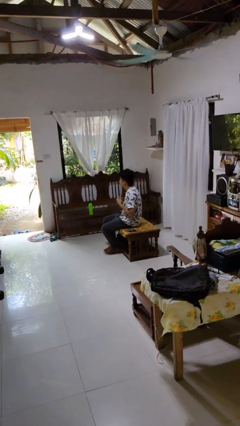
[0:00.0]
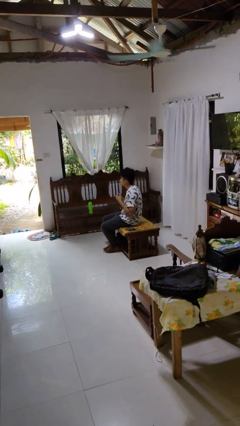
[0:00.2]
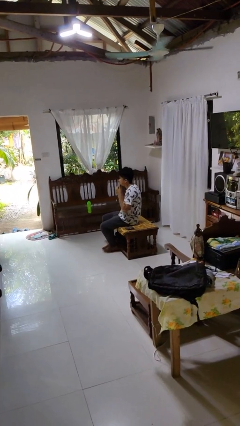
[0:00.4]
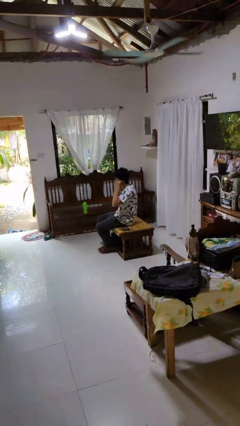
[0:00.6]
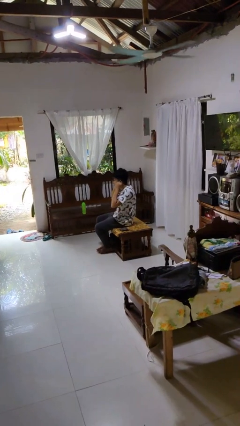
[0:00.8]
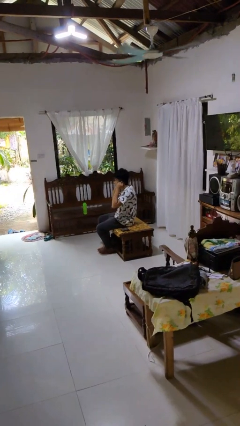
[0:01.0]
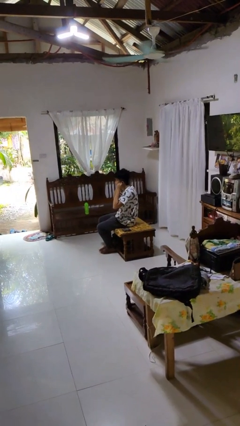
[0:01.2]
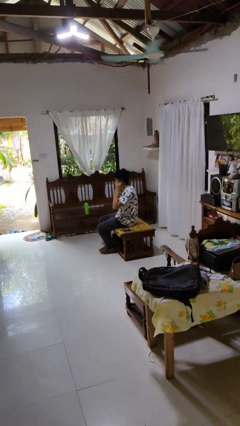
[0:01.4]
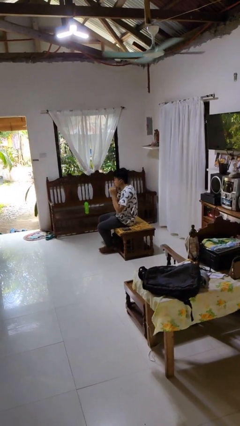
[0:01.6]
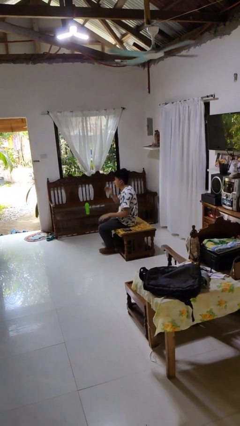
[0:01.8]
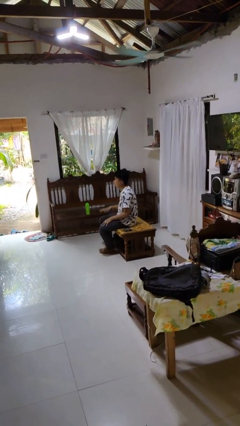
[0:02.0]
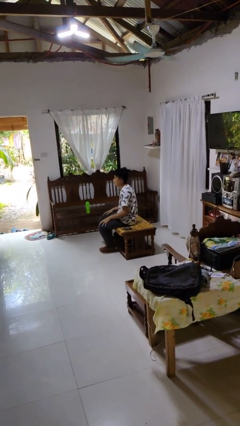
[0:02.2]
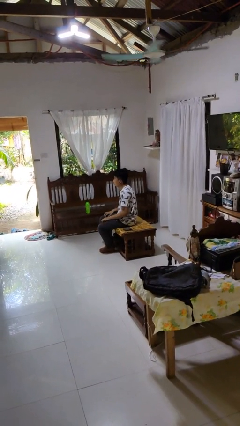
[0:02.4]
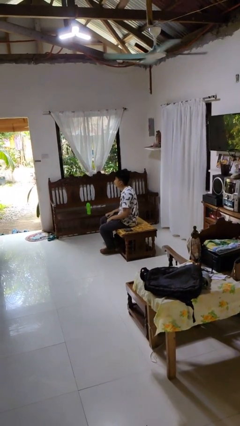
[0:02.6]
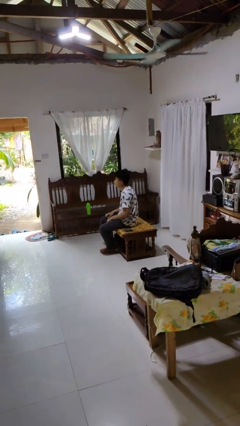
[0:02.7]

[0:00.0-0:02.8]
person puts on headphones

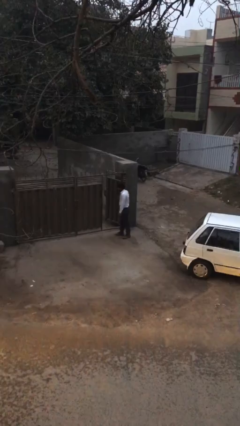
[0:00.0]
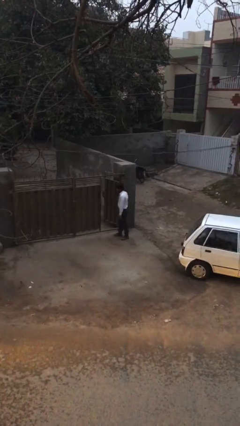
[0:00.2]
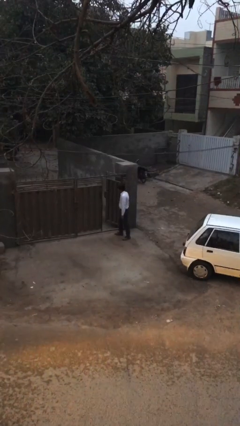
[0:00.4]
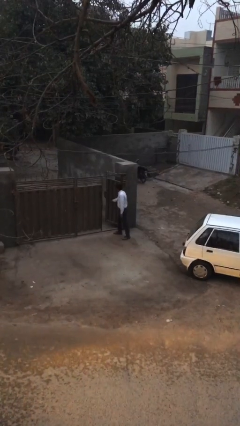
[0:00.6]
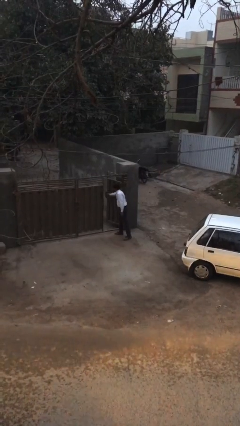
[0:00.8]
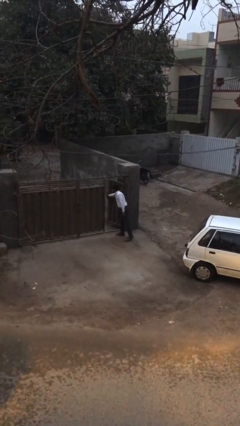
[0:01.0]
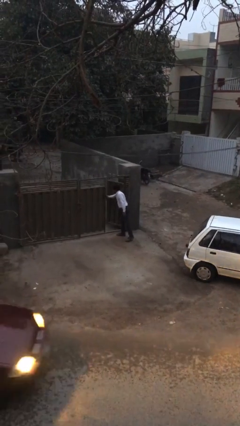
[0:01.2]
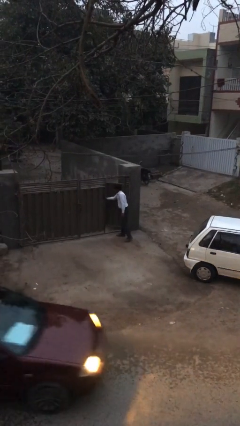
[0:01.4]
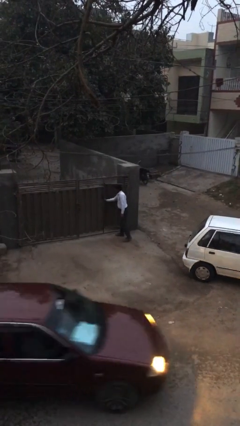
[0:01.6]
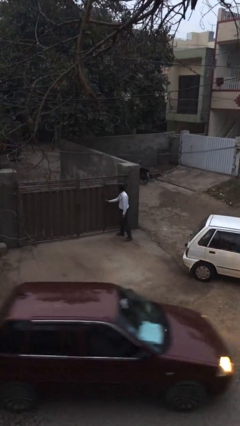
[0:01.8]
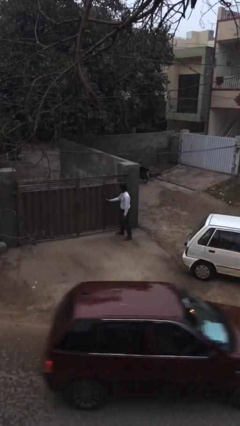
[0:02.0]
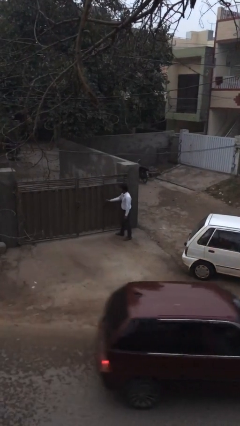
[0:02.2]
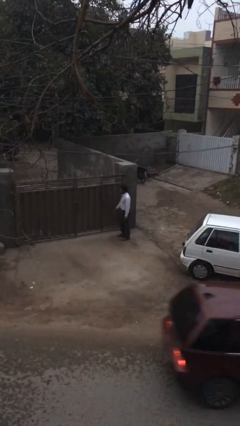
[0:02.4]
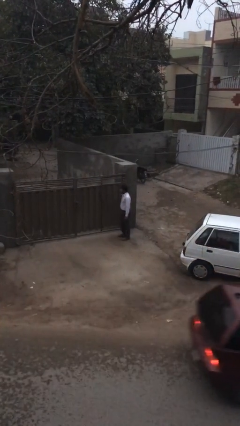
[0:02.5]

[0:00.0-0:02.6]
person closes facility door

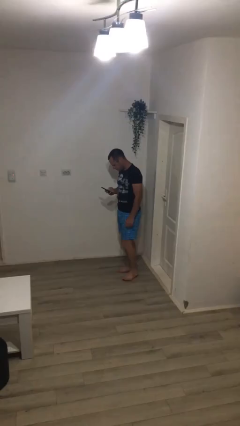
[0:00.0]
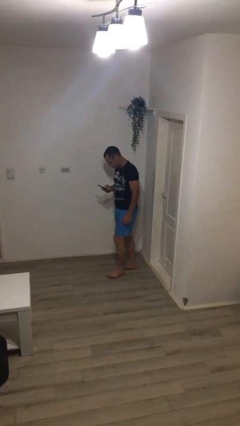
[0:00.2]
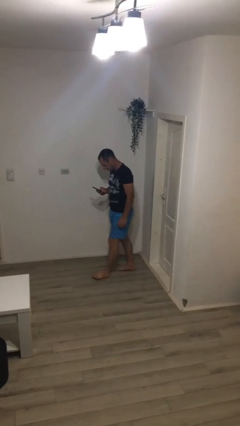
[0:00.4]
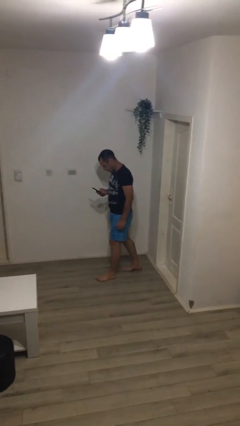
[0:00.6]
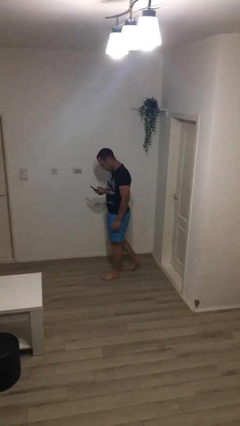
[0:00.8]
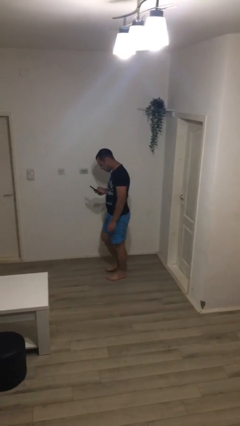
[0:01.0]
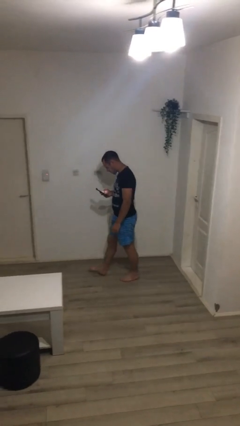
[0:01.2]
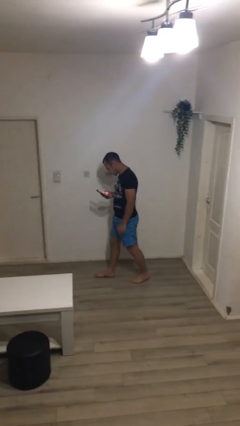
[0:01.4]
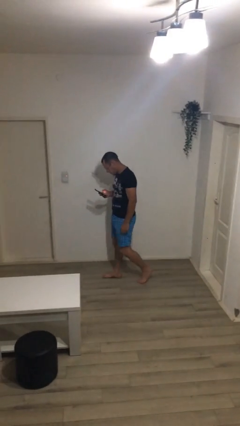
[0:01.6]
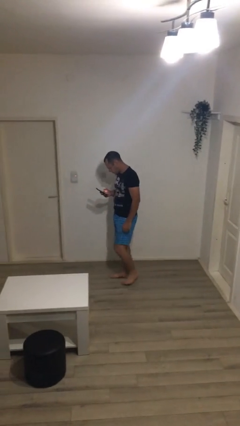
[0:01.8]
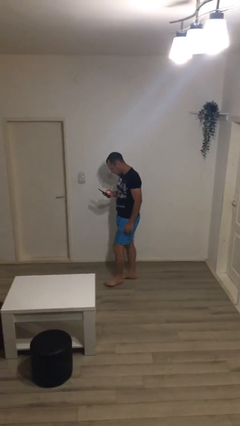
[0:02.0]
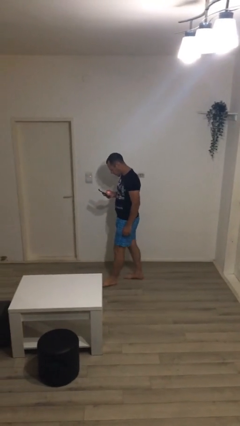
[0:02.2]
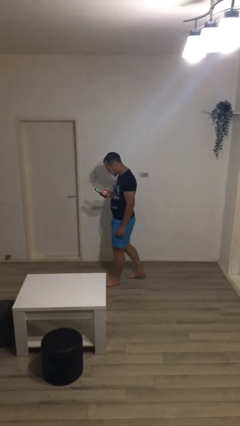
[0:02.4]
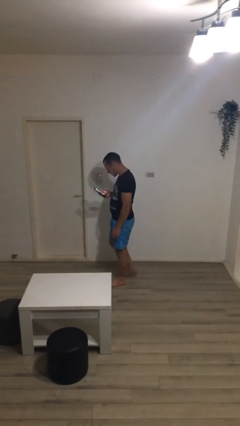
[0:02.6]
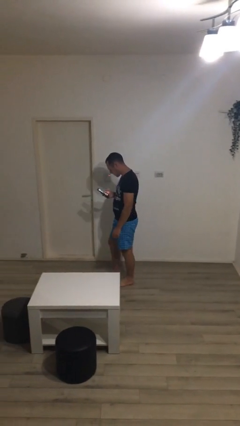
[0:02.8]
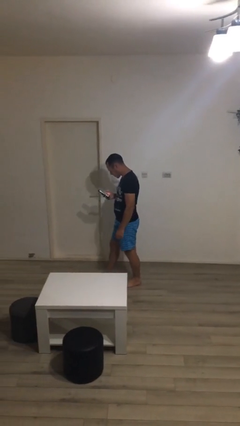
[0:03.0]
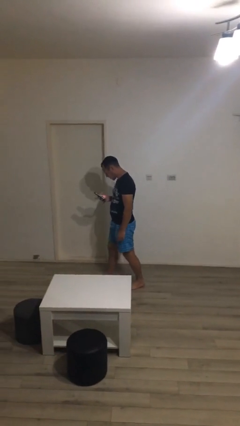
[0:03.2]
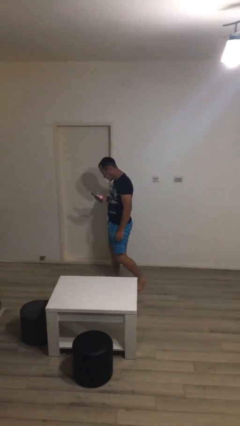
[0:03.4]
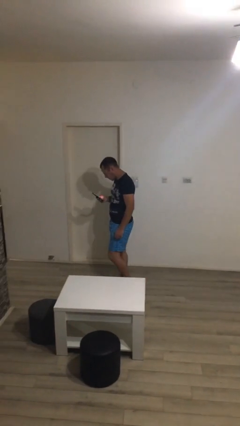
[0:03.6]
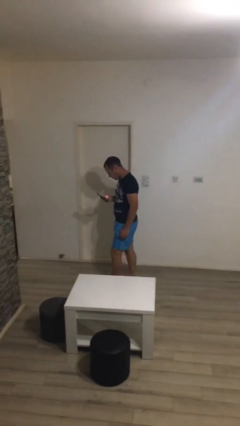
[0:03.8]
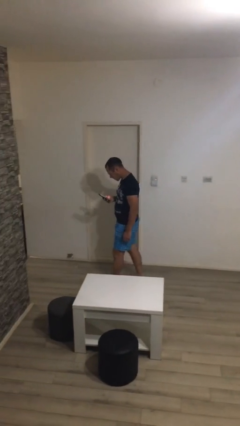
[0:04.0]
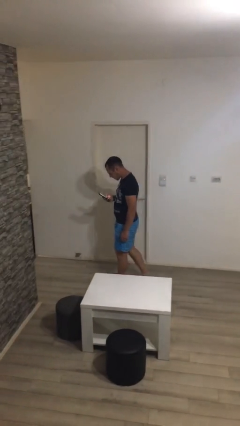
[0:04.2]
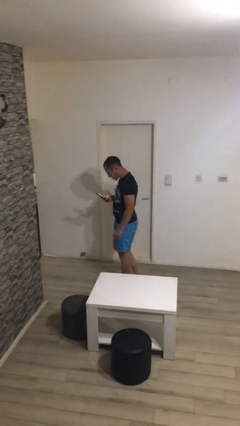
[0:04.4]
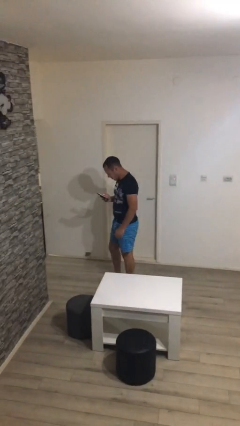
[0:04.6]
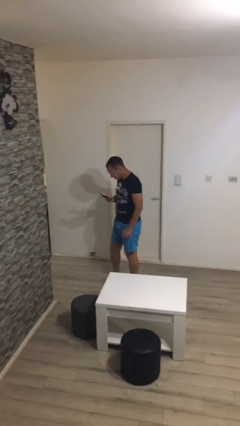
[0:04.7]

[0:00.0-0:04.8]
person texts on phone

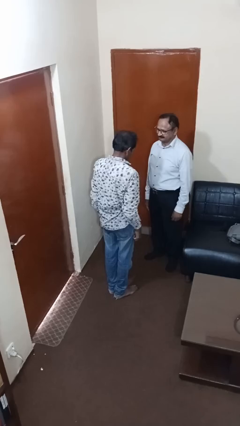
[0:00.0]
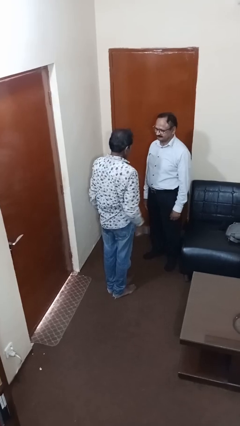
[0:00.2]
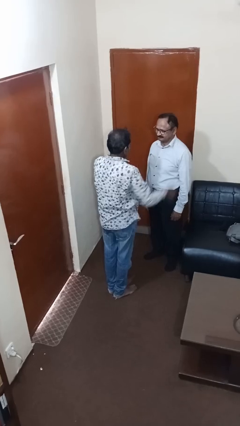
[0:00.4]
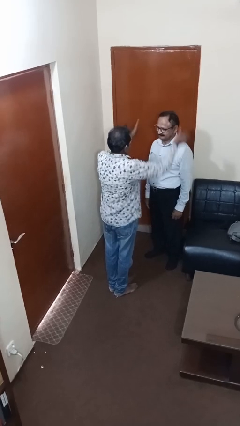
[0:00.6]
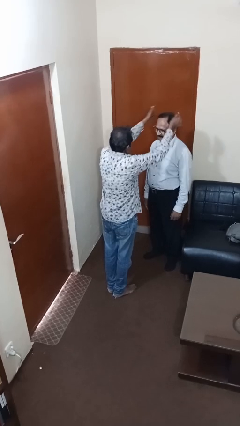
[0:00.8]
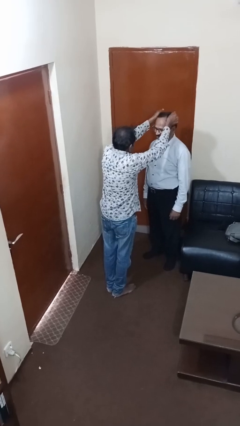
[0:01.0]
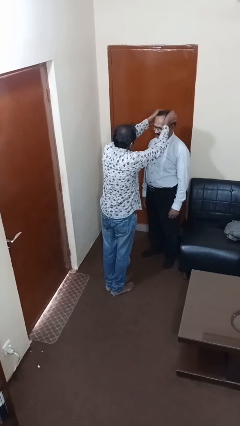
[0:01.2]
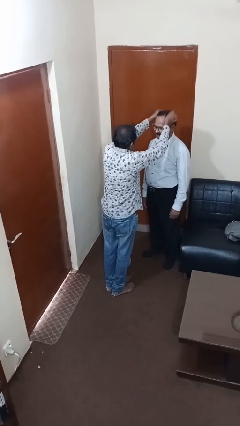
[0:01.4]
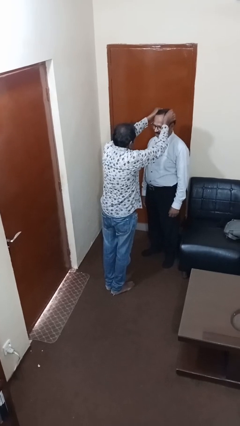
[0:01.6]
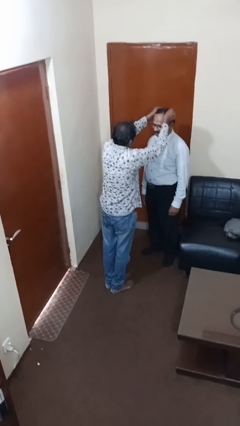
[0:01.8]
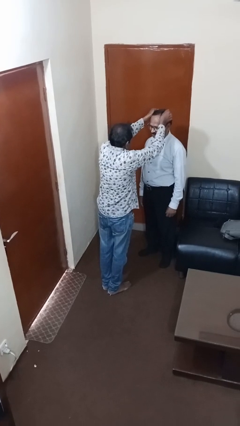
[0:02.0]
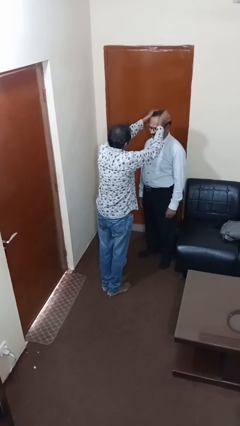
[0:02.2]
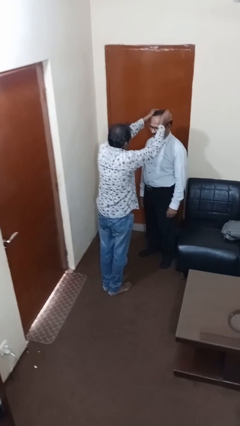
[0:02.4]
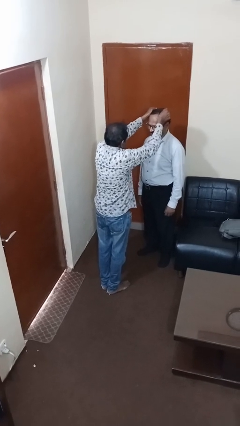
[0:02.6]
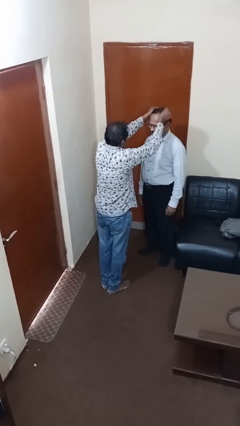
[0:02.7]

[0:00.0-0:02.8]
person grabs person by hair

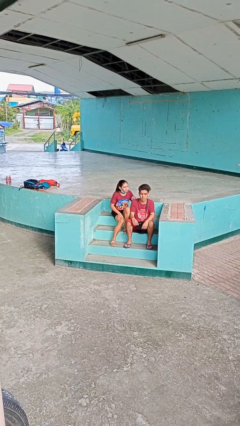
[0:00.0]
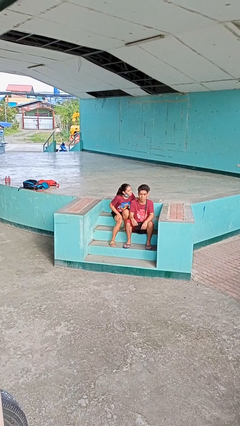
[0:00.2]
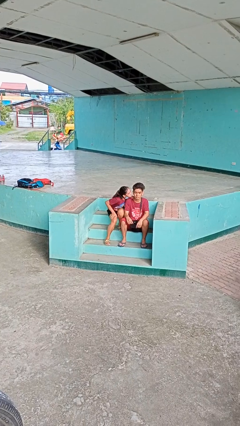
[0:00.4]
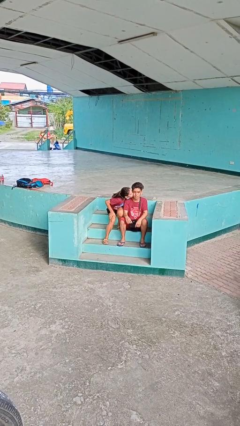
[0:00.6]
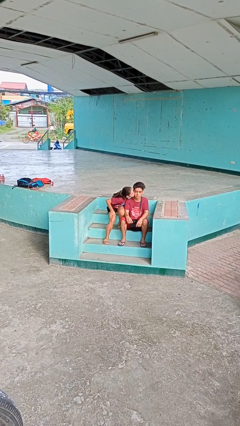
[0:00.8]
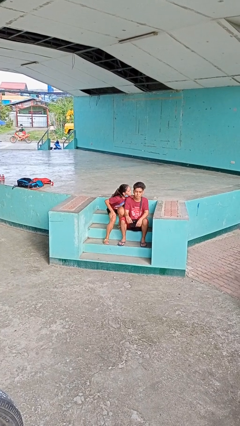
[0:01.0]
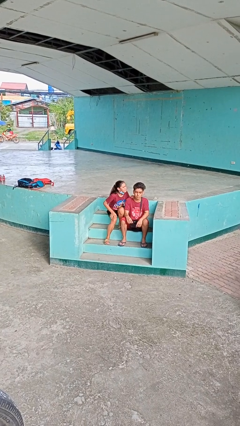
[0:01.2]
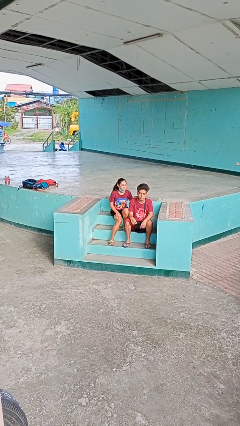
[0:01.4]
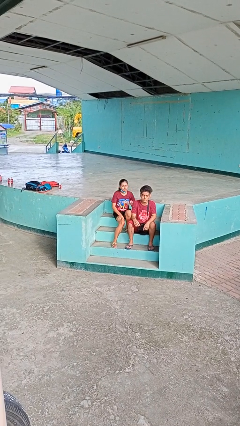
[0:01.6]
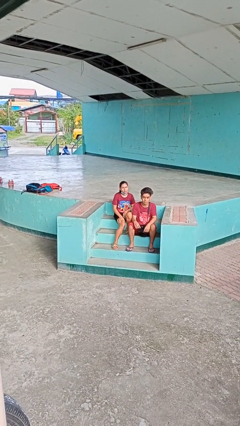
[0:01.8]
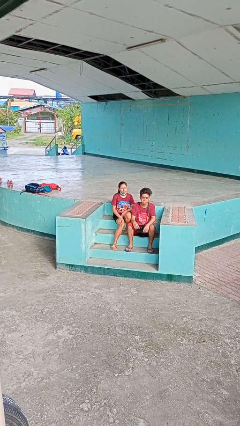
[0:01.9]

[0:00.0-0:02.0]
person kisses cheek of person

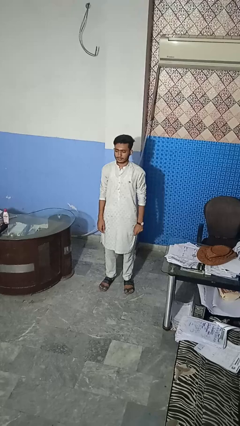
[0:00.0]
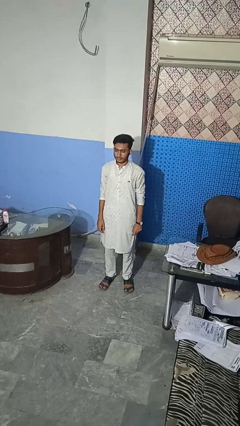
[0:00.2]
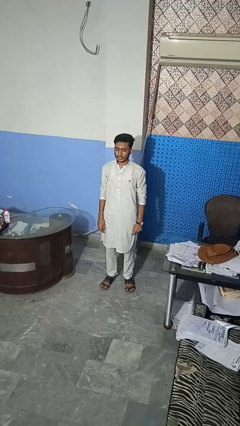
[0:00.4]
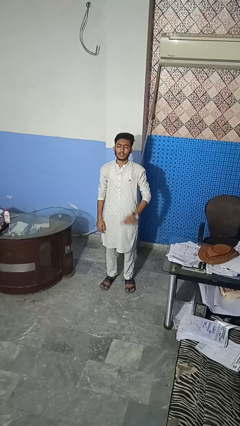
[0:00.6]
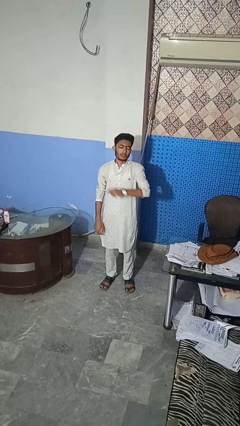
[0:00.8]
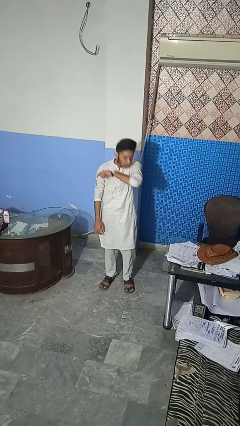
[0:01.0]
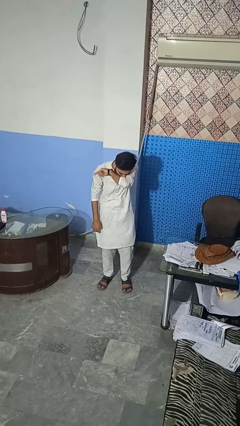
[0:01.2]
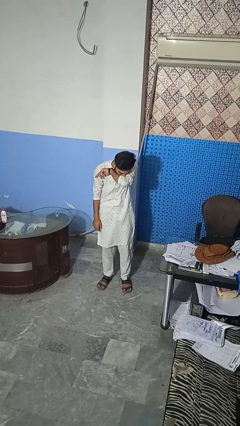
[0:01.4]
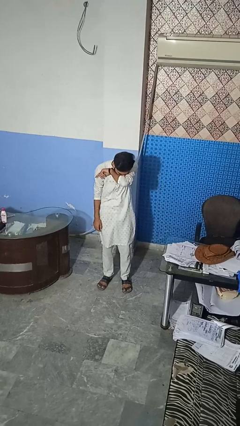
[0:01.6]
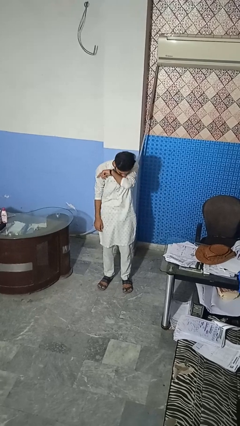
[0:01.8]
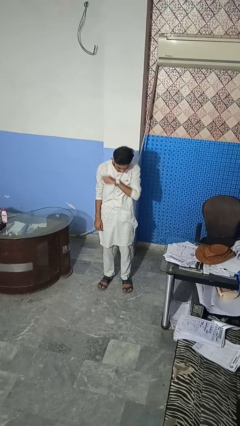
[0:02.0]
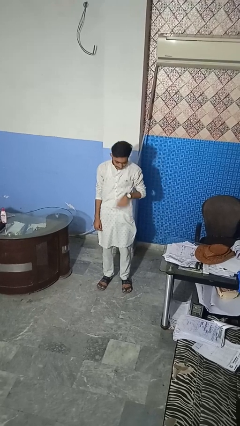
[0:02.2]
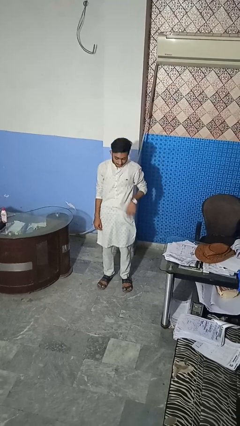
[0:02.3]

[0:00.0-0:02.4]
person sneezes into arm

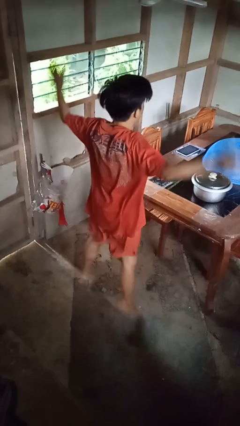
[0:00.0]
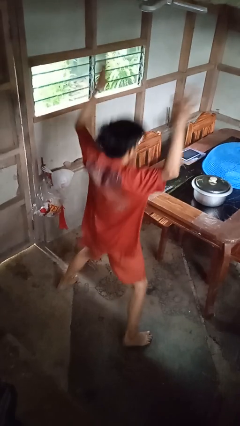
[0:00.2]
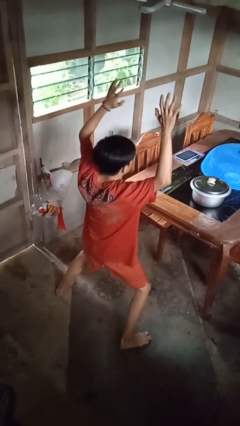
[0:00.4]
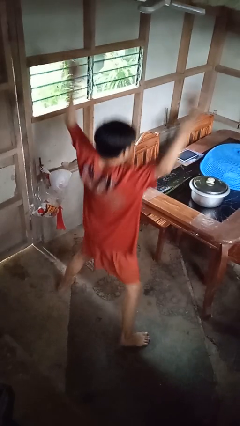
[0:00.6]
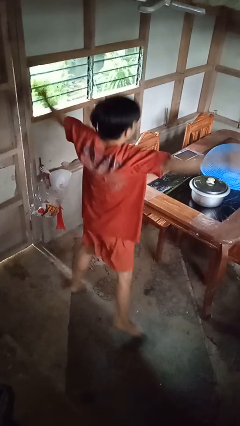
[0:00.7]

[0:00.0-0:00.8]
person exercises with jumping jacks
